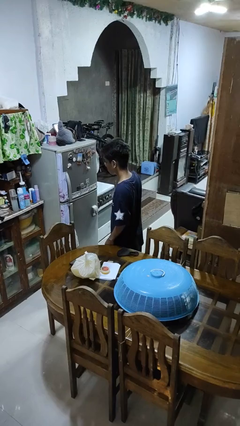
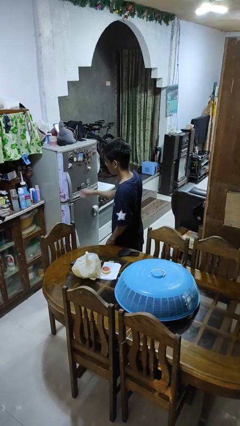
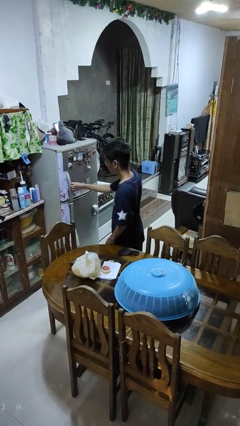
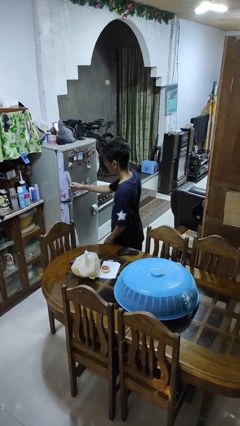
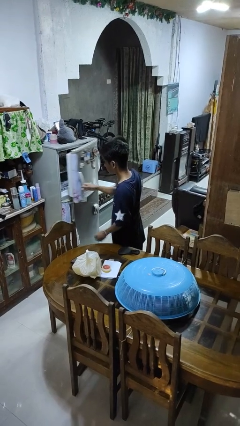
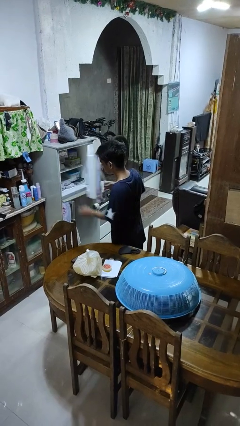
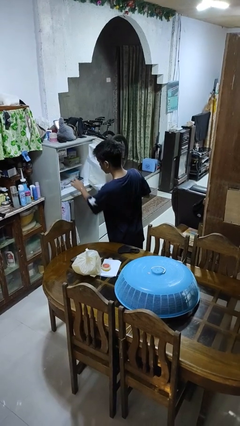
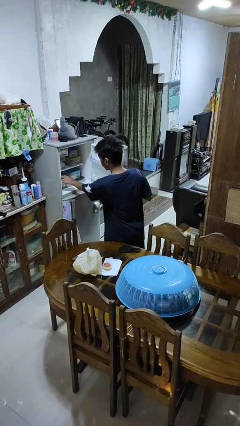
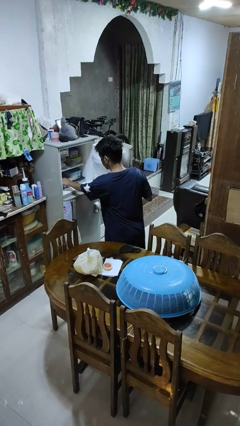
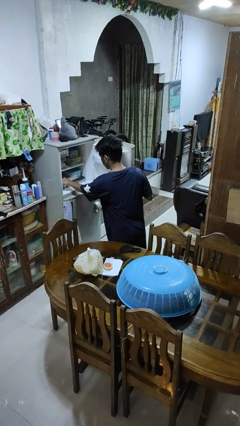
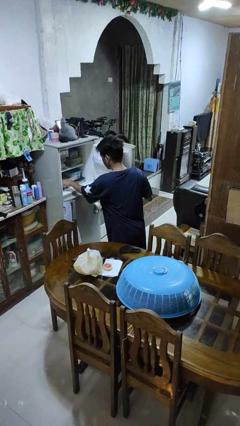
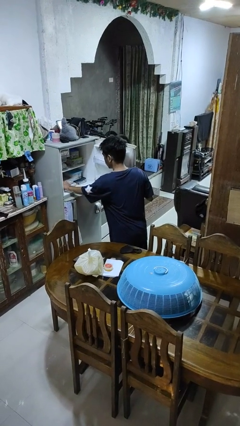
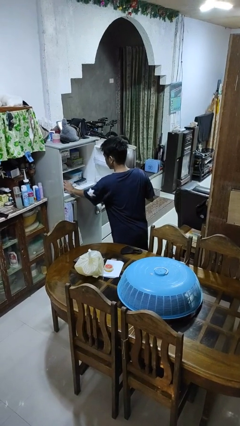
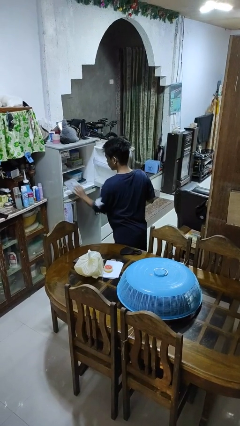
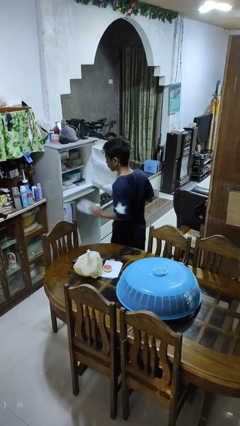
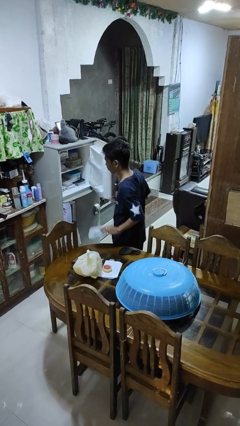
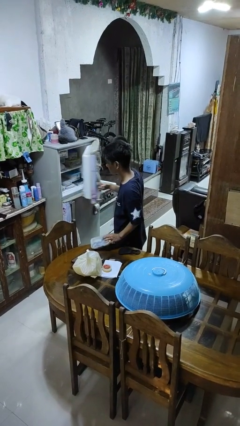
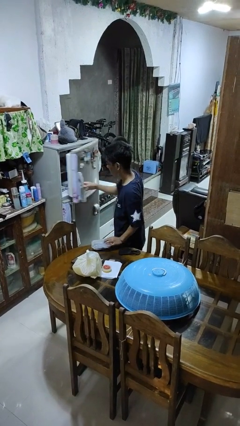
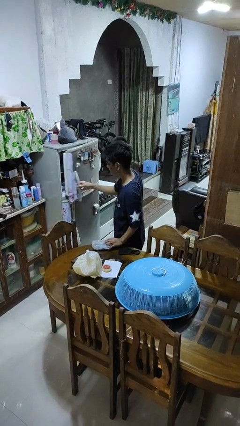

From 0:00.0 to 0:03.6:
person takes object from refrigerator

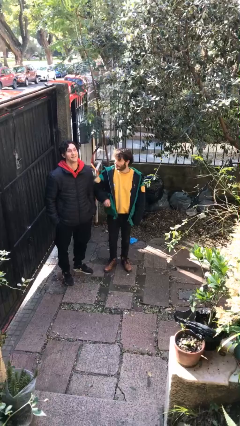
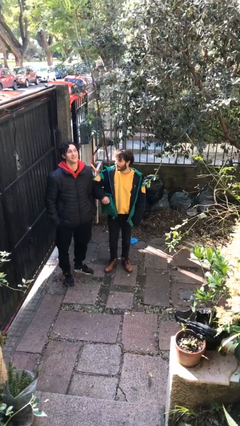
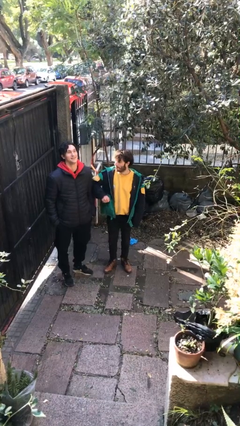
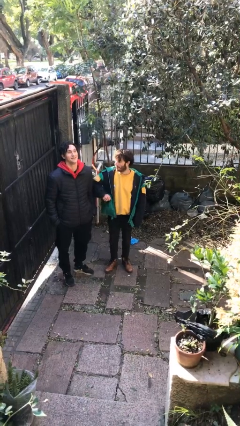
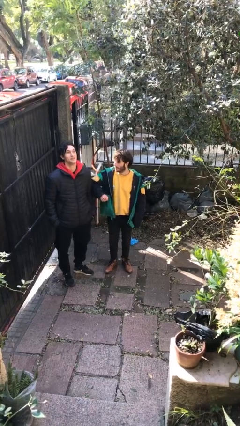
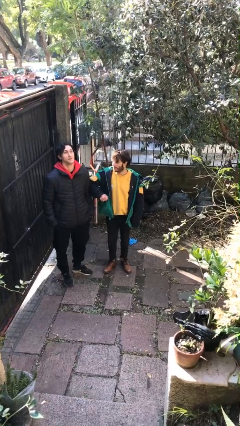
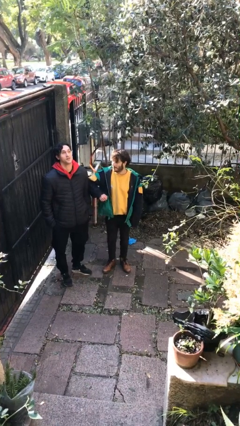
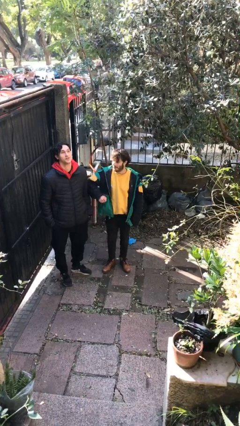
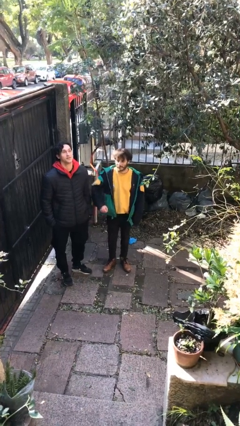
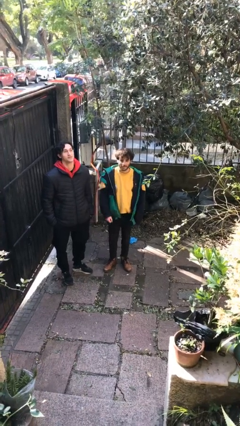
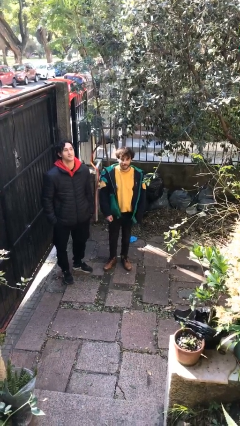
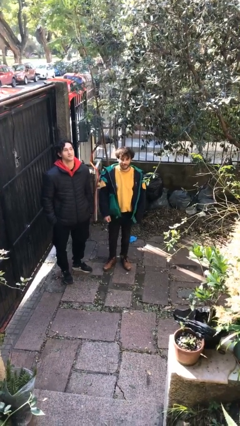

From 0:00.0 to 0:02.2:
person nudges person with elbow

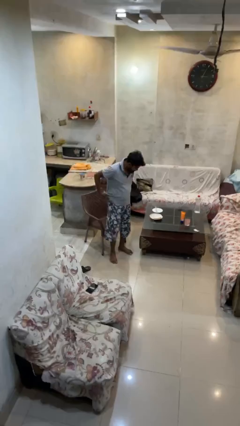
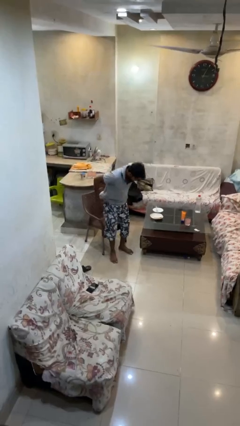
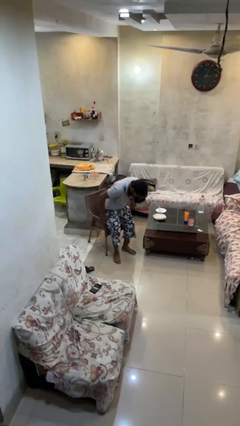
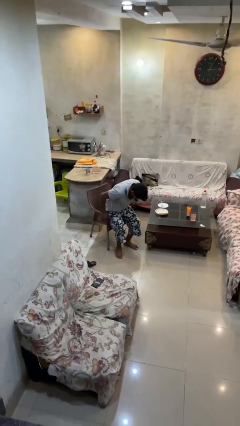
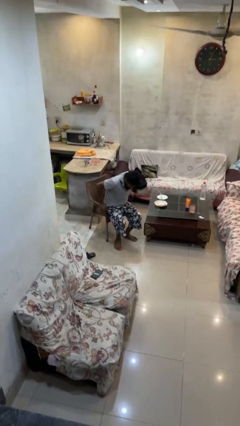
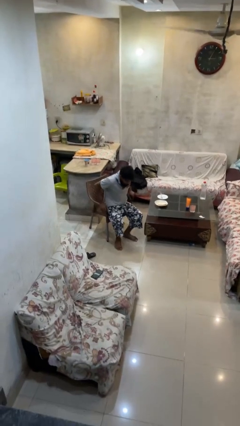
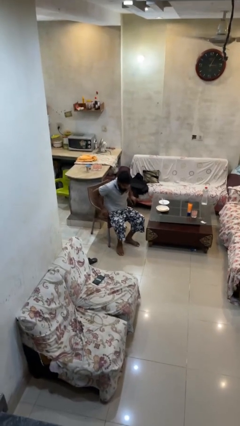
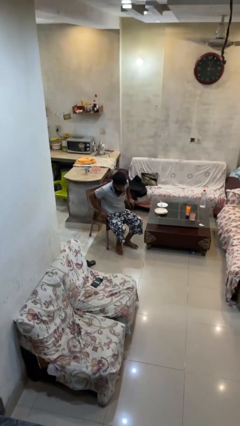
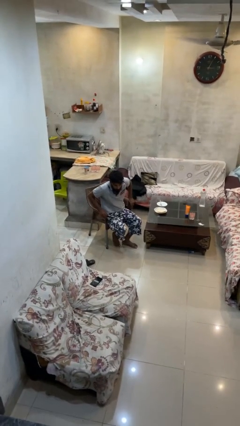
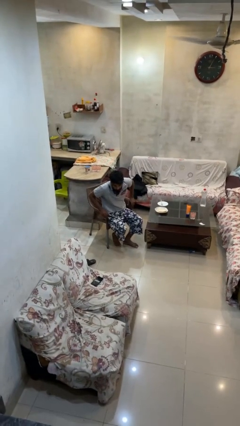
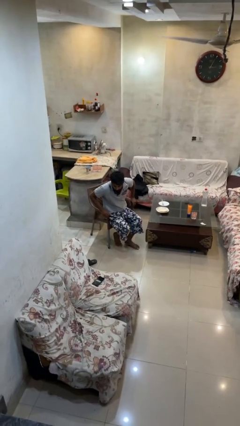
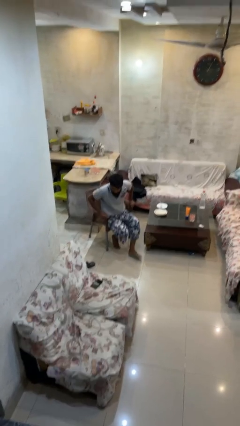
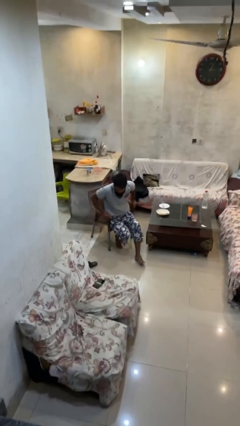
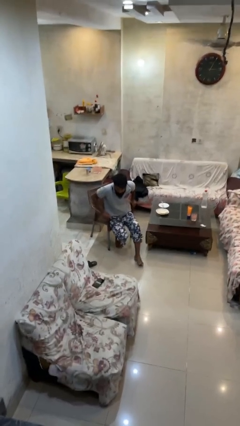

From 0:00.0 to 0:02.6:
person sits down

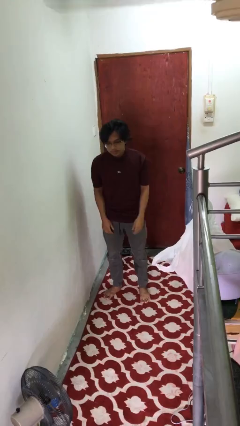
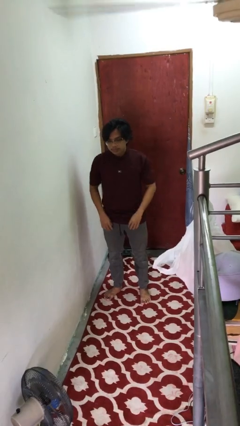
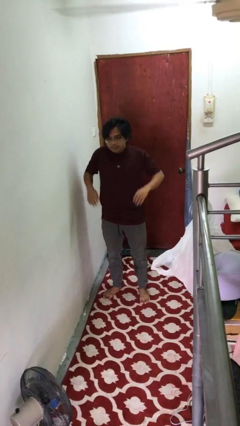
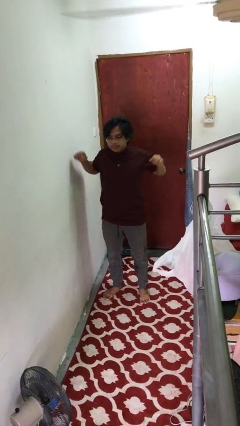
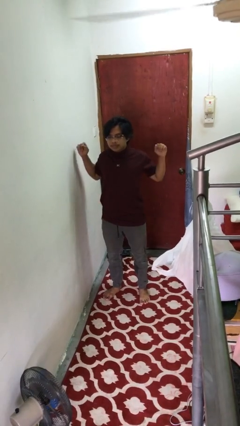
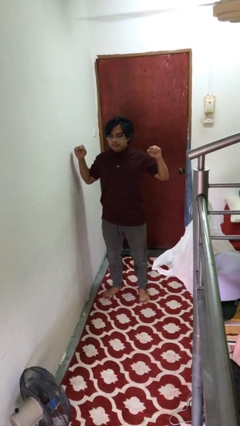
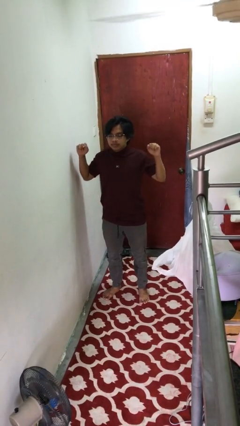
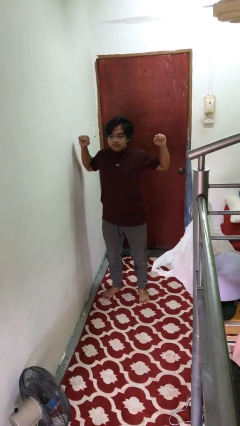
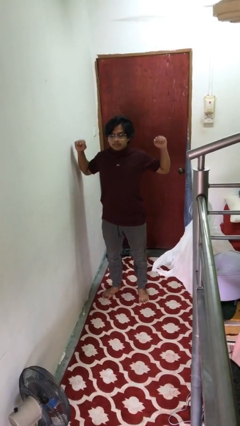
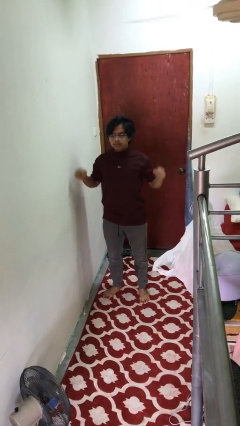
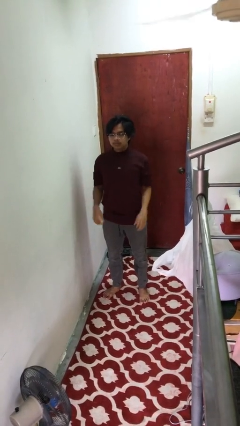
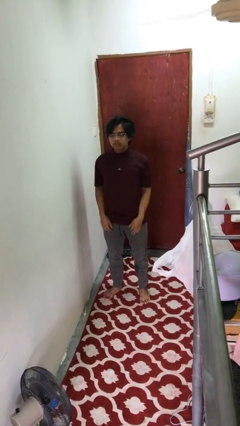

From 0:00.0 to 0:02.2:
person stretches arms to side

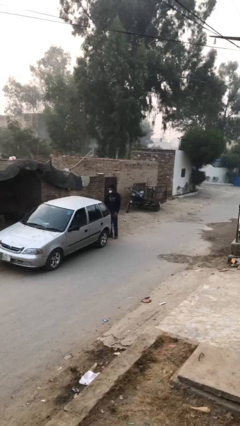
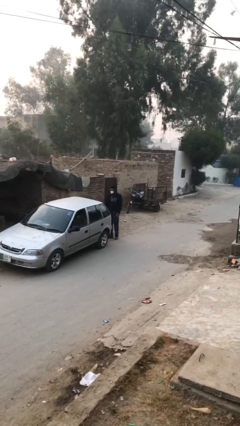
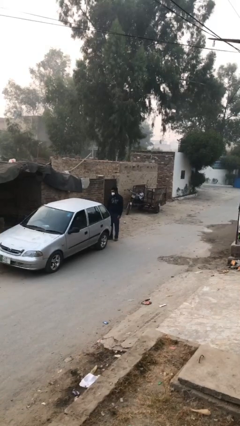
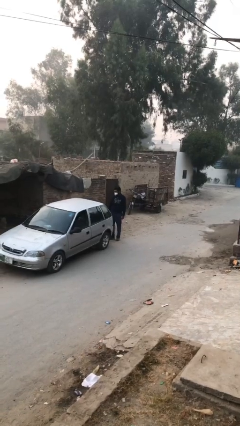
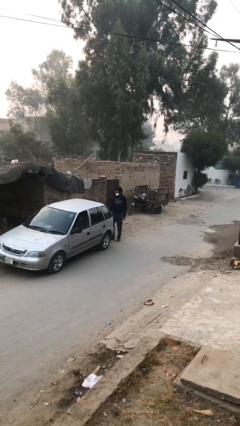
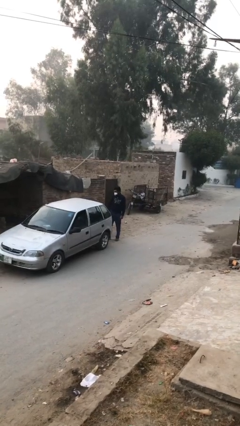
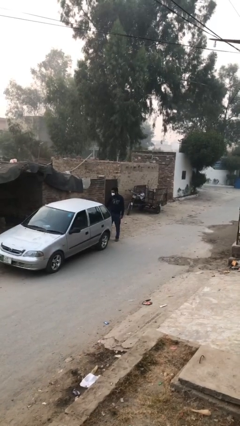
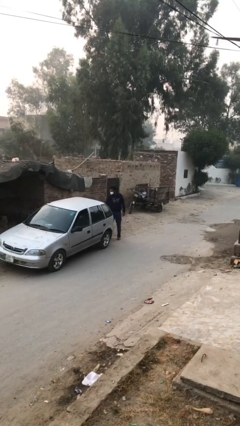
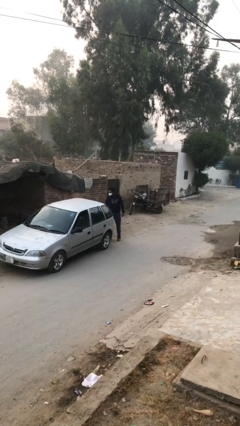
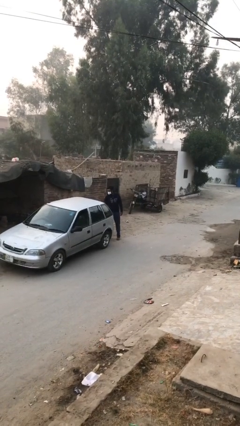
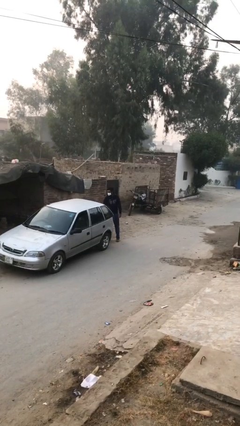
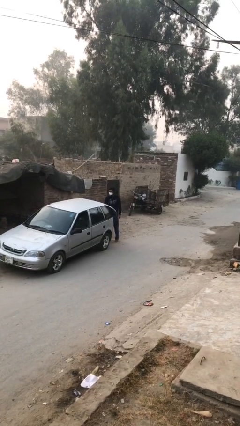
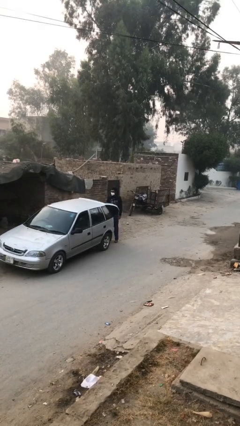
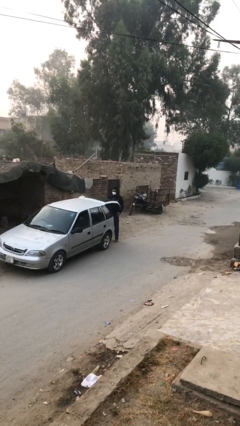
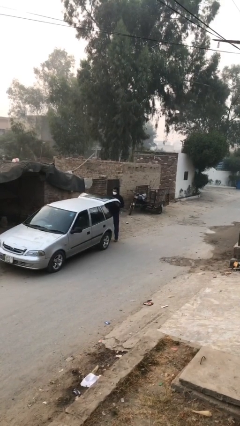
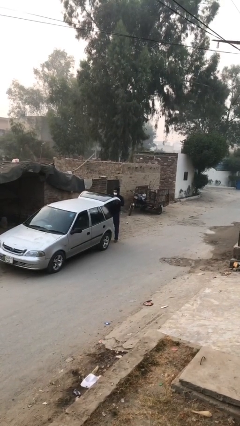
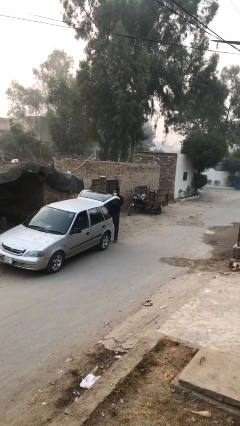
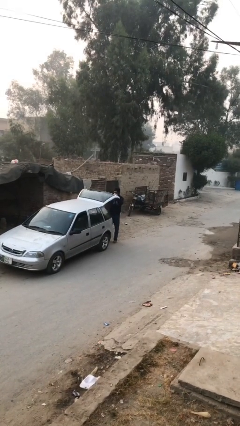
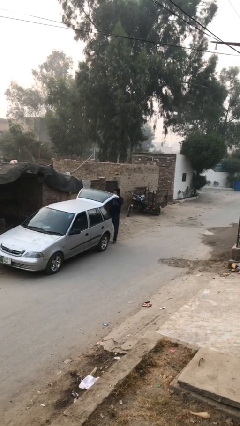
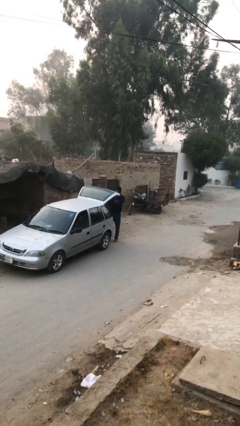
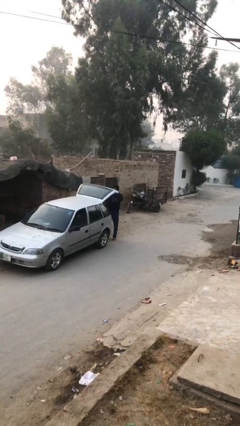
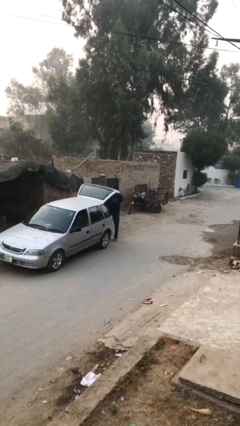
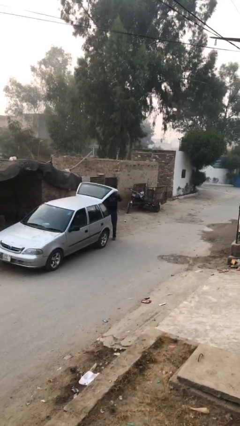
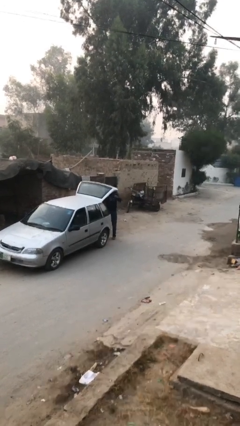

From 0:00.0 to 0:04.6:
person opens car trunk

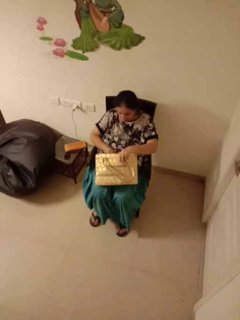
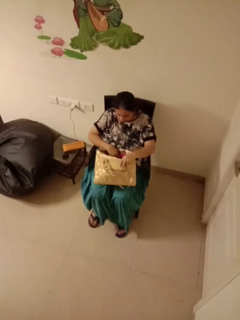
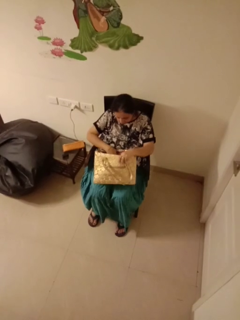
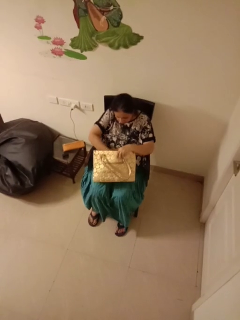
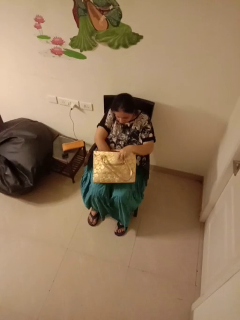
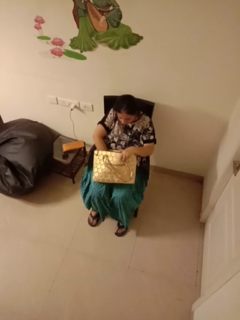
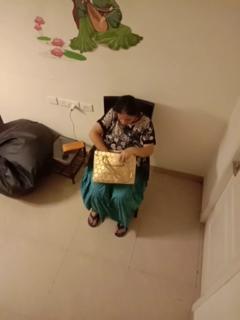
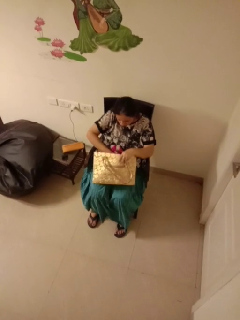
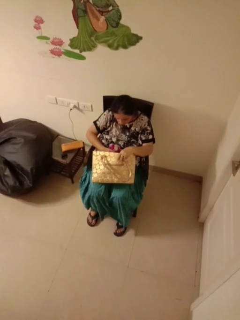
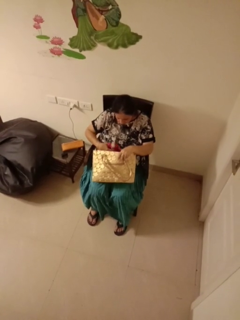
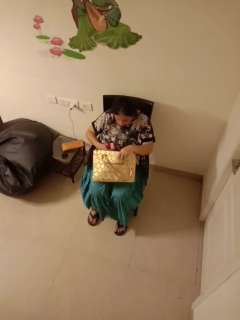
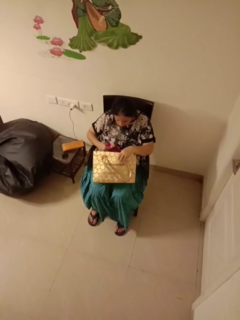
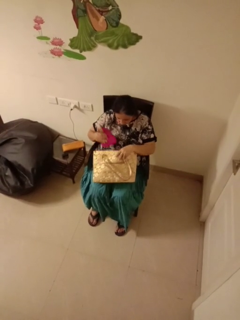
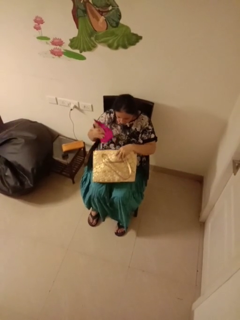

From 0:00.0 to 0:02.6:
person searches in purse
